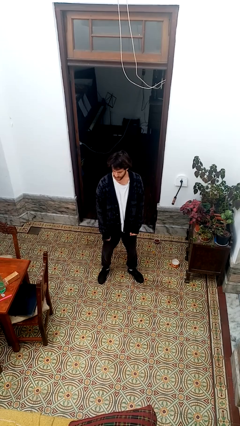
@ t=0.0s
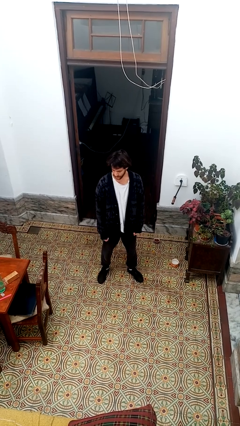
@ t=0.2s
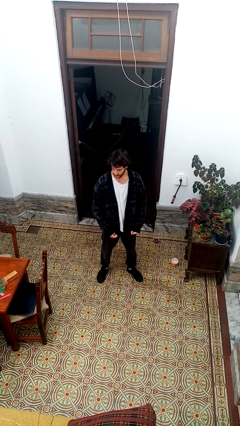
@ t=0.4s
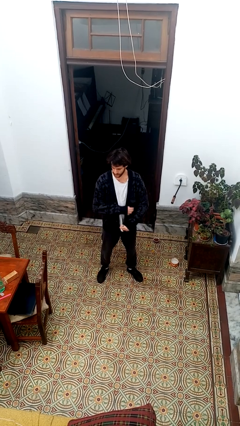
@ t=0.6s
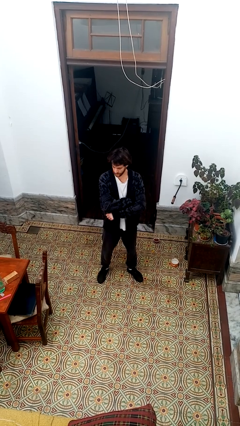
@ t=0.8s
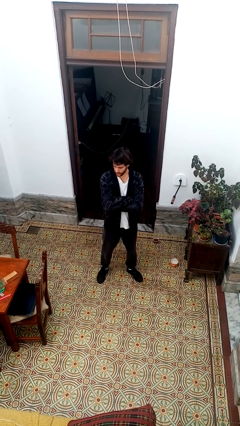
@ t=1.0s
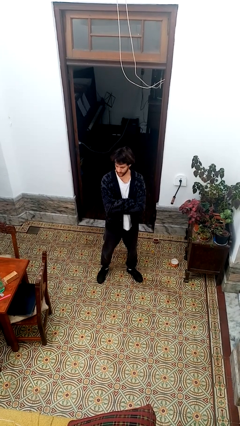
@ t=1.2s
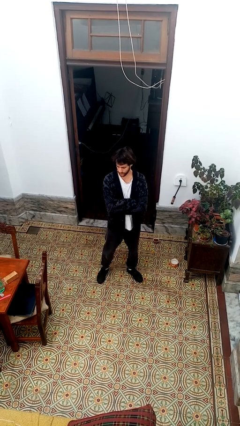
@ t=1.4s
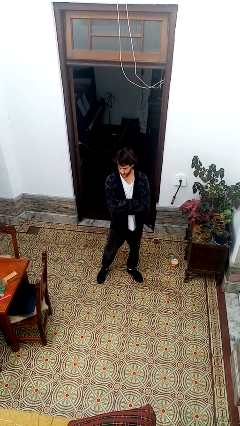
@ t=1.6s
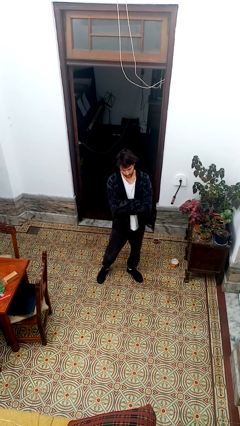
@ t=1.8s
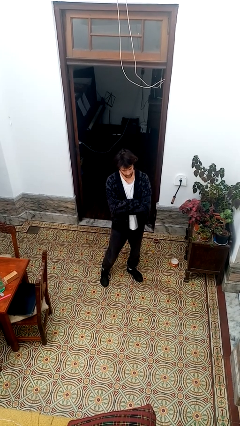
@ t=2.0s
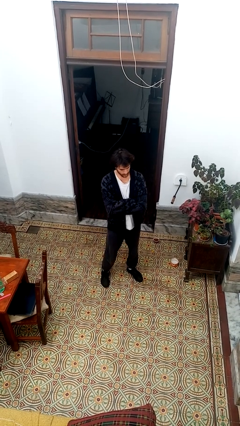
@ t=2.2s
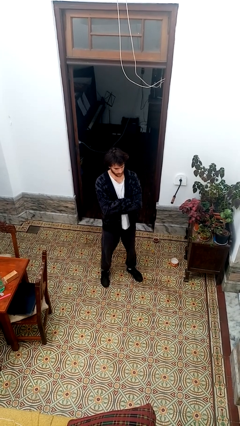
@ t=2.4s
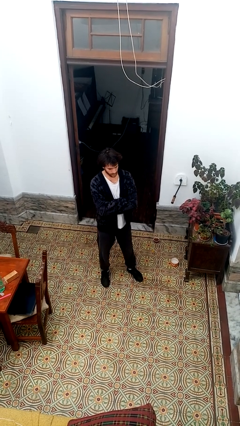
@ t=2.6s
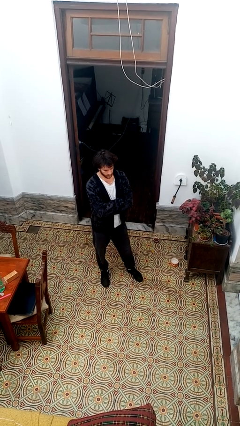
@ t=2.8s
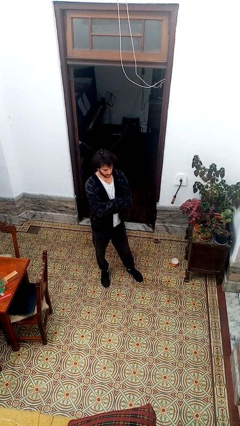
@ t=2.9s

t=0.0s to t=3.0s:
person crosses arms

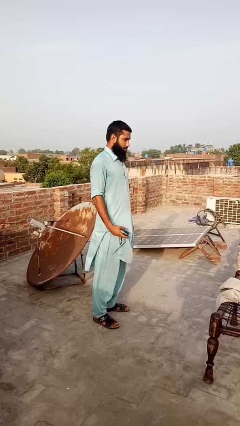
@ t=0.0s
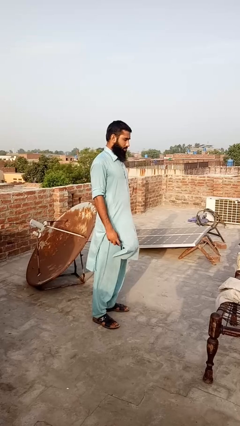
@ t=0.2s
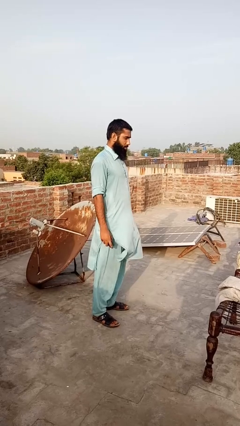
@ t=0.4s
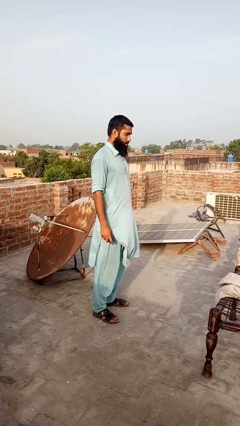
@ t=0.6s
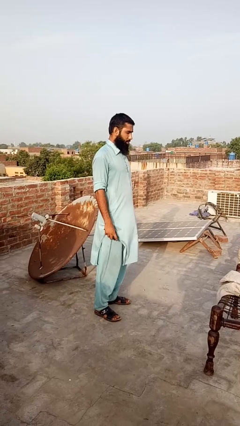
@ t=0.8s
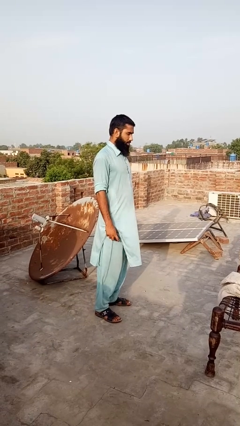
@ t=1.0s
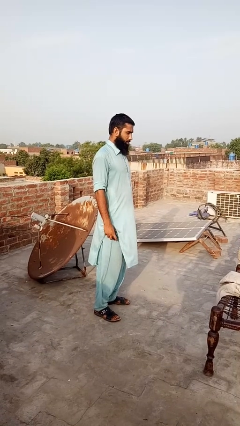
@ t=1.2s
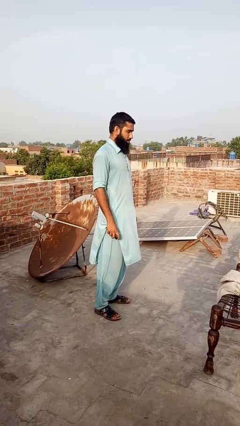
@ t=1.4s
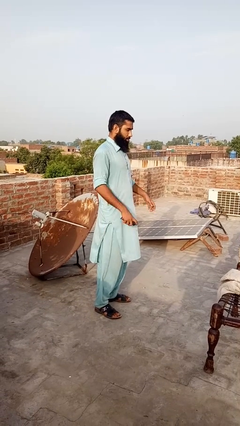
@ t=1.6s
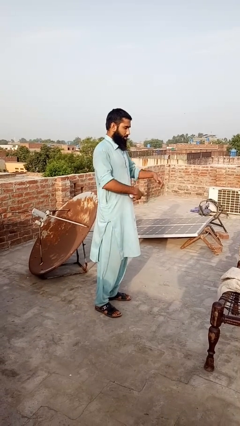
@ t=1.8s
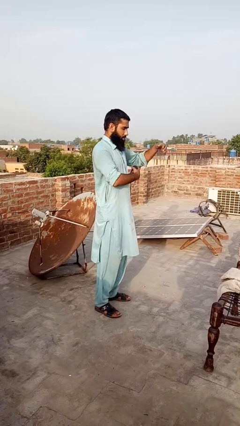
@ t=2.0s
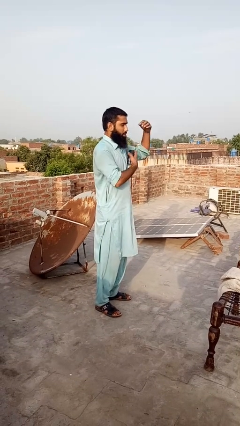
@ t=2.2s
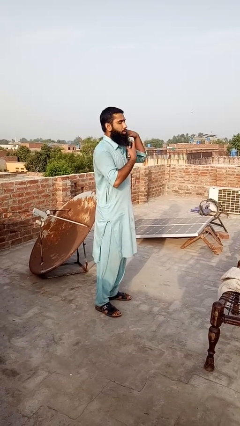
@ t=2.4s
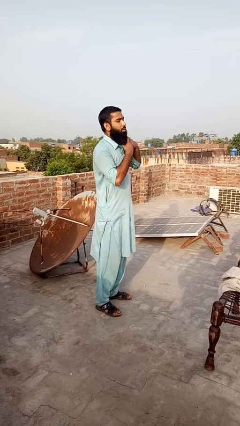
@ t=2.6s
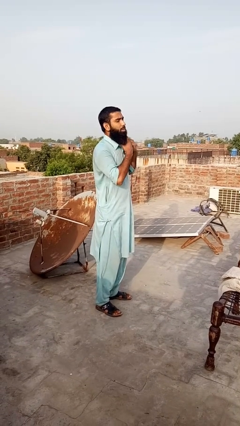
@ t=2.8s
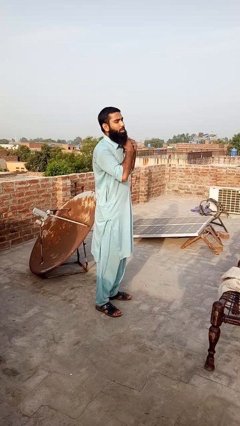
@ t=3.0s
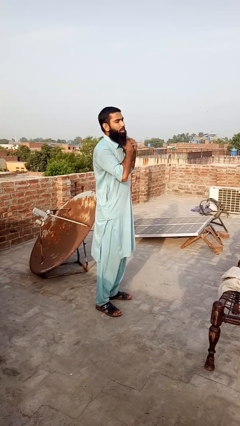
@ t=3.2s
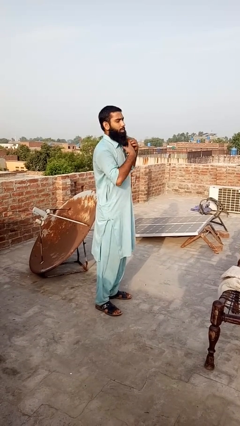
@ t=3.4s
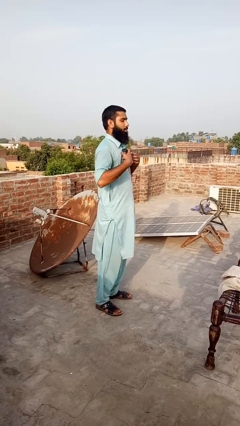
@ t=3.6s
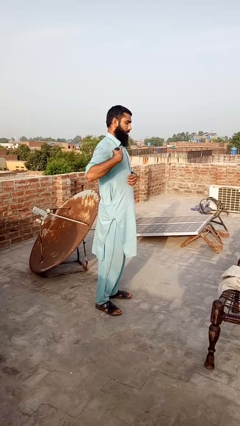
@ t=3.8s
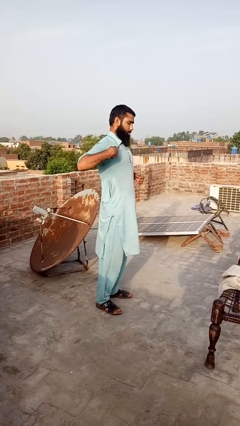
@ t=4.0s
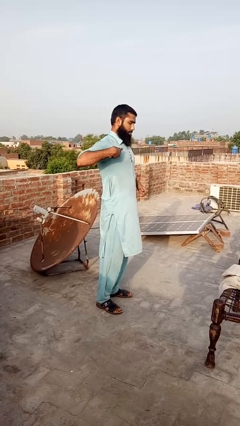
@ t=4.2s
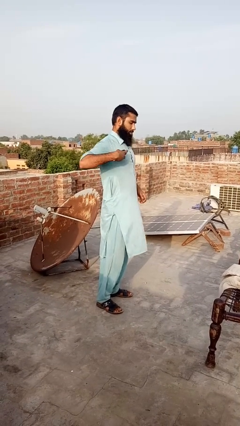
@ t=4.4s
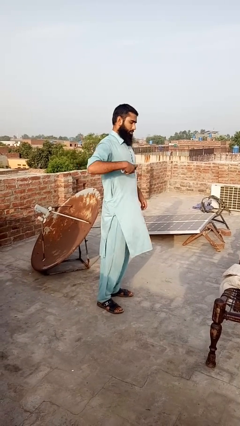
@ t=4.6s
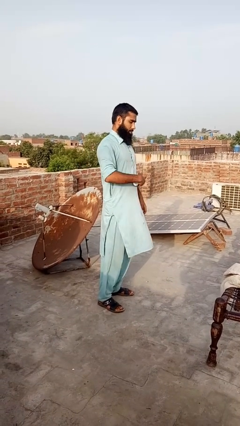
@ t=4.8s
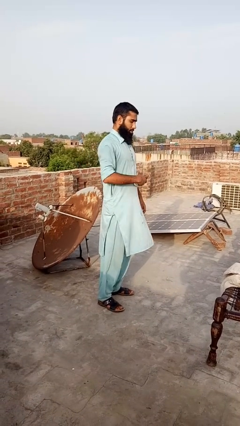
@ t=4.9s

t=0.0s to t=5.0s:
person applies deodorant

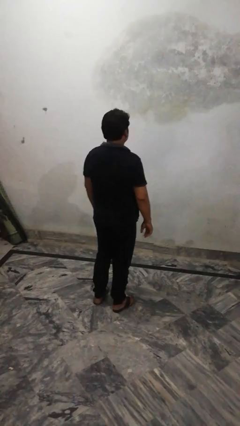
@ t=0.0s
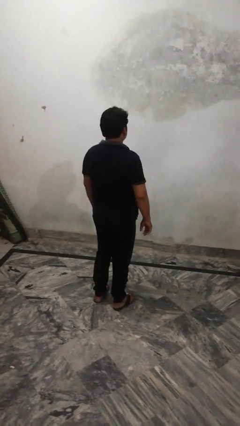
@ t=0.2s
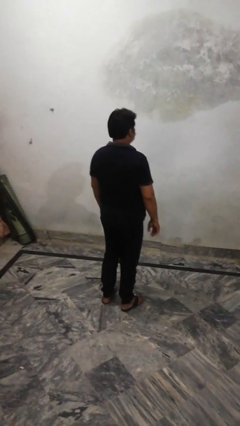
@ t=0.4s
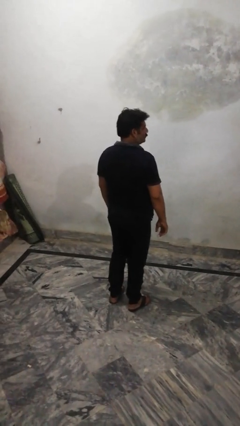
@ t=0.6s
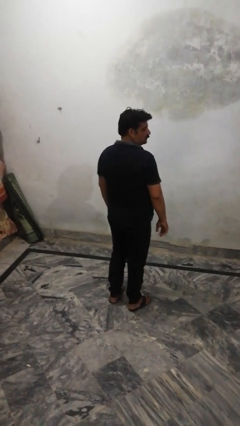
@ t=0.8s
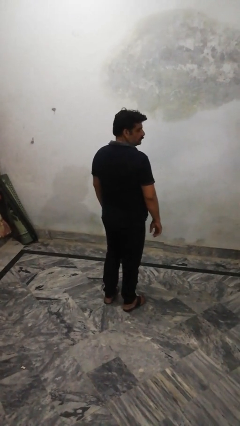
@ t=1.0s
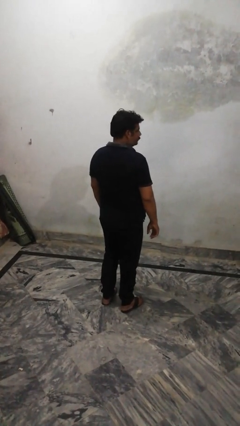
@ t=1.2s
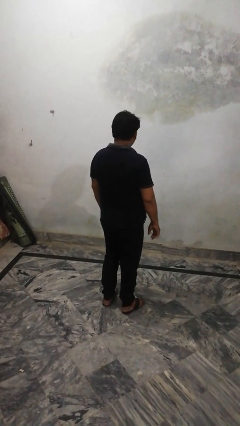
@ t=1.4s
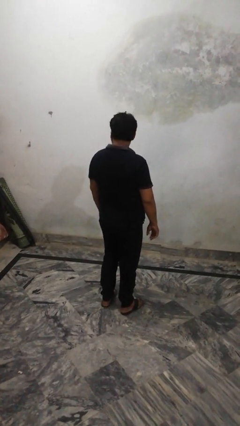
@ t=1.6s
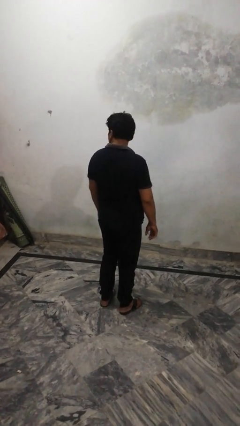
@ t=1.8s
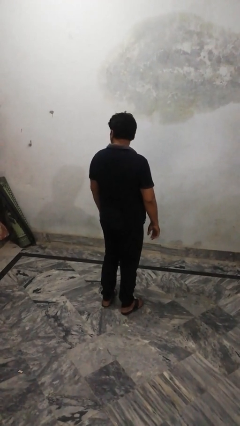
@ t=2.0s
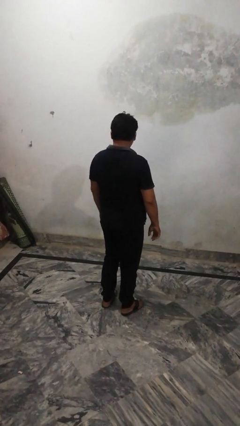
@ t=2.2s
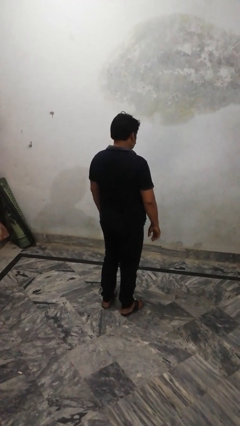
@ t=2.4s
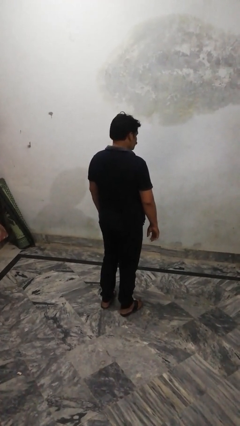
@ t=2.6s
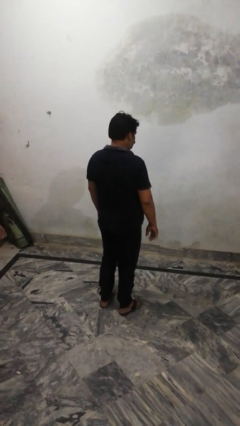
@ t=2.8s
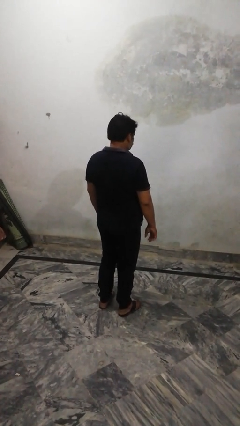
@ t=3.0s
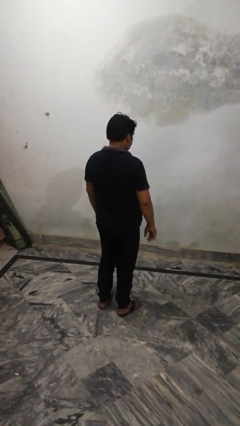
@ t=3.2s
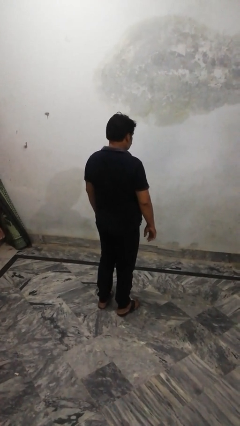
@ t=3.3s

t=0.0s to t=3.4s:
person shakes head

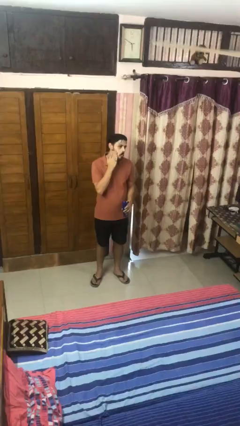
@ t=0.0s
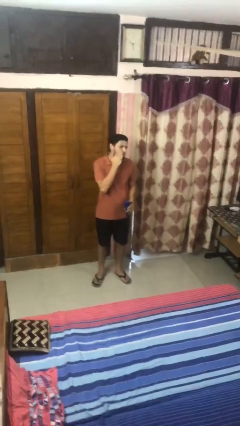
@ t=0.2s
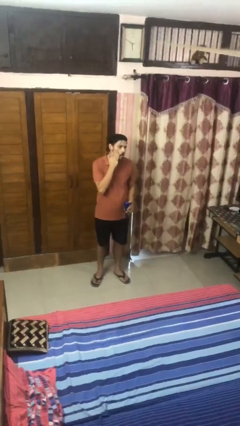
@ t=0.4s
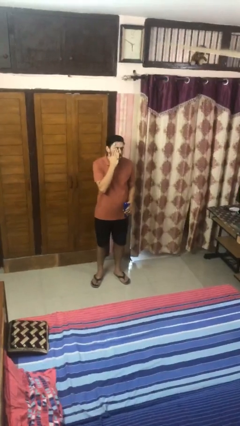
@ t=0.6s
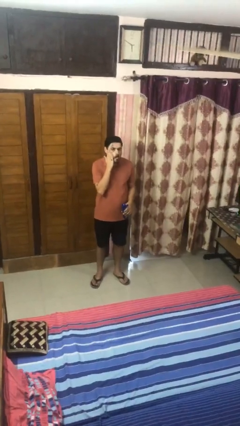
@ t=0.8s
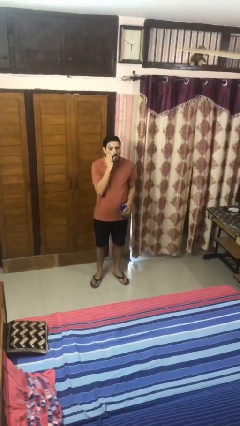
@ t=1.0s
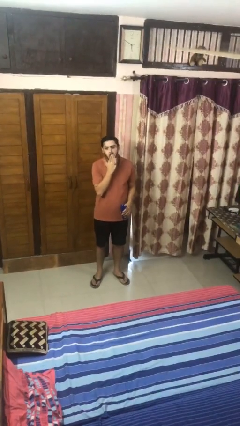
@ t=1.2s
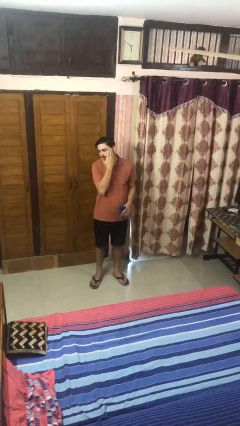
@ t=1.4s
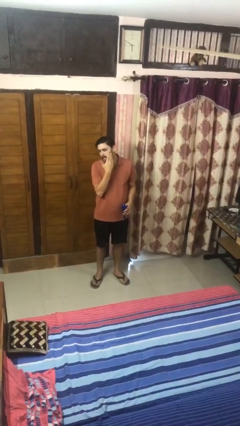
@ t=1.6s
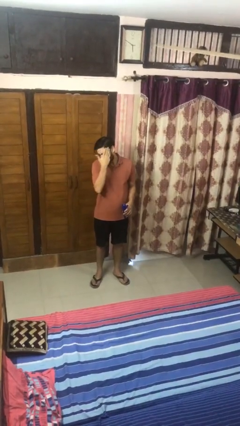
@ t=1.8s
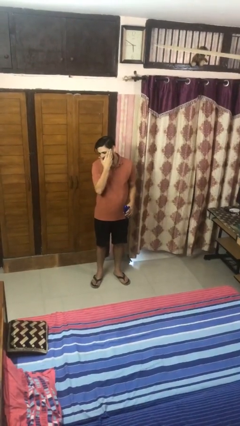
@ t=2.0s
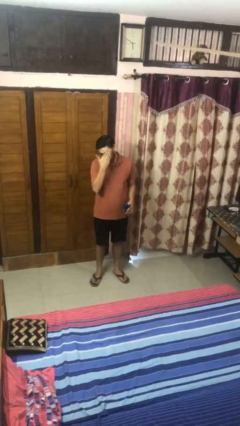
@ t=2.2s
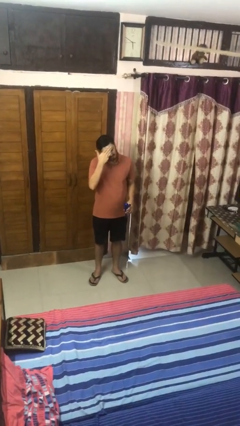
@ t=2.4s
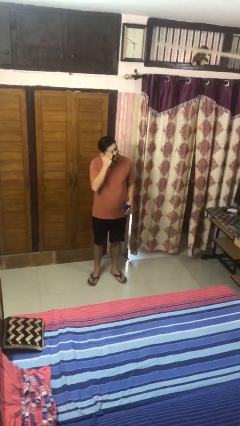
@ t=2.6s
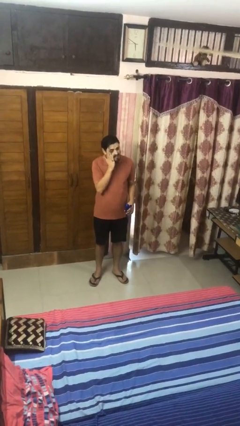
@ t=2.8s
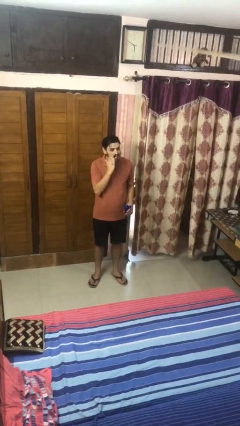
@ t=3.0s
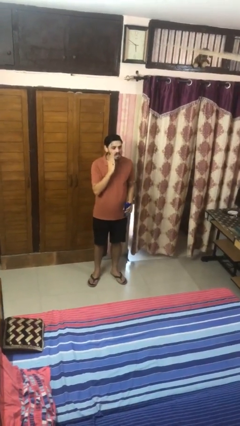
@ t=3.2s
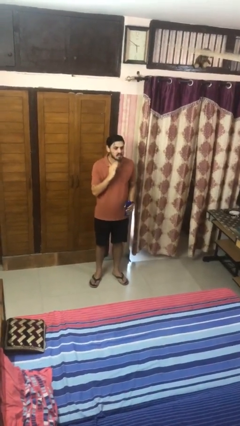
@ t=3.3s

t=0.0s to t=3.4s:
person applies sunscreen

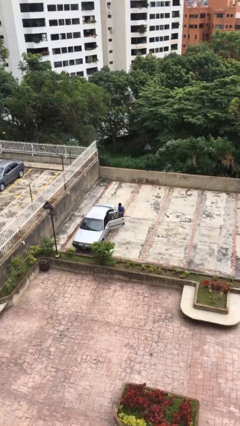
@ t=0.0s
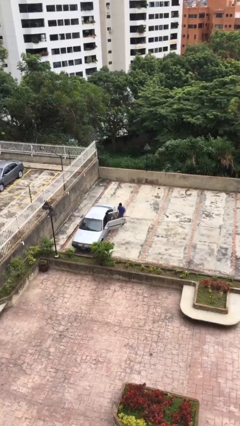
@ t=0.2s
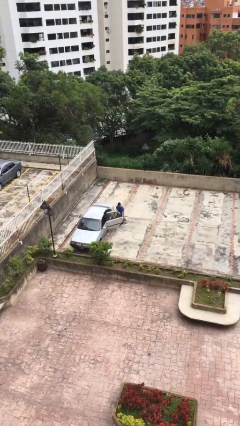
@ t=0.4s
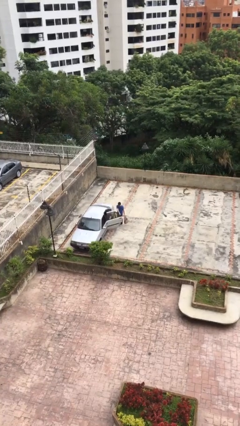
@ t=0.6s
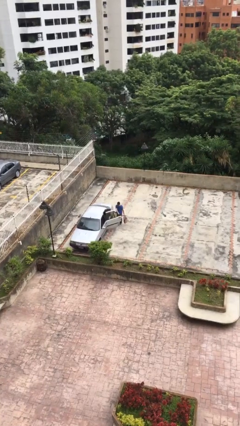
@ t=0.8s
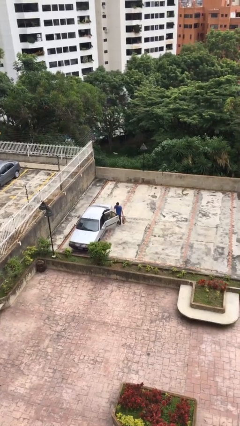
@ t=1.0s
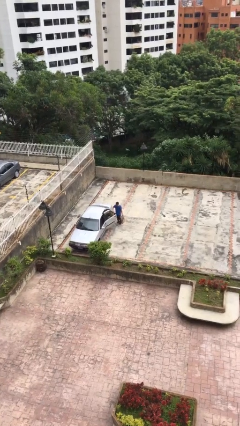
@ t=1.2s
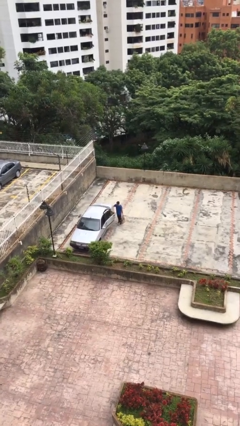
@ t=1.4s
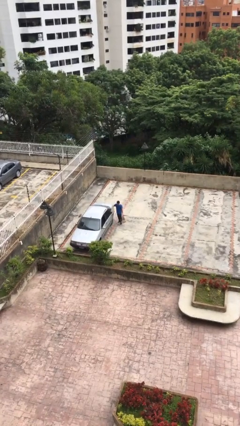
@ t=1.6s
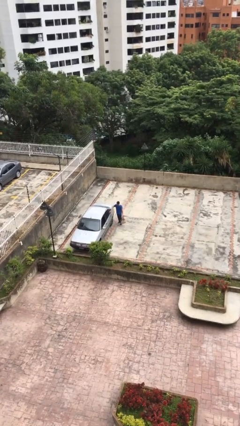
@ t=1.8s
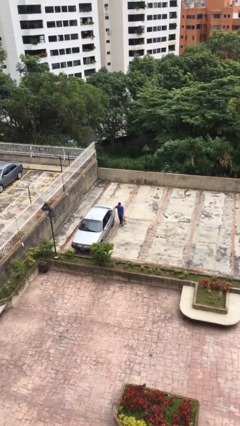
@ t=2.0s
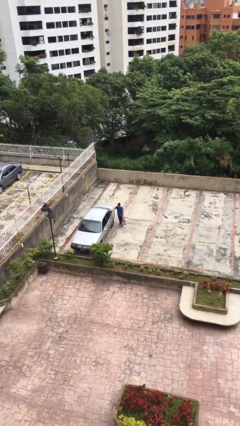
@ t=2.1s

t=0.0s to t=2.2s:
person closes car door

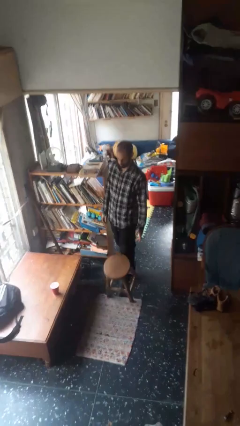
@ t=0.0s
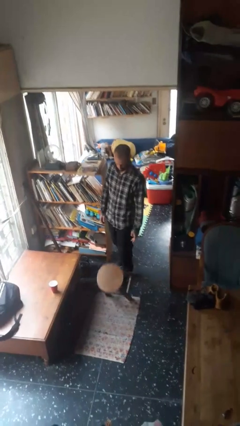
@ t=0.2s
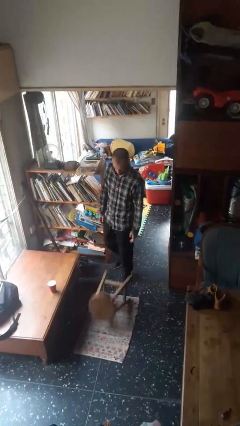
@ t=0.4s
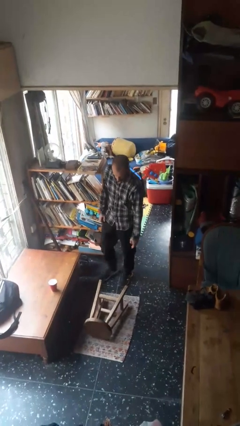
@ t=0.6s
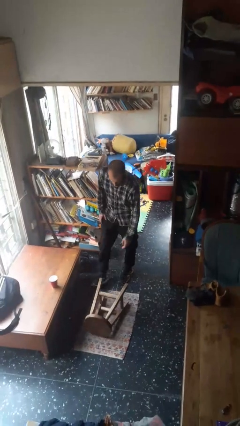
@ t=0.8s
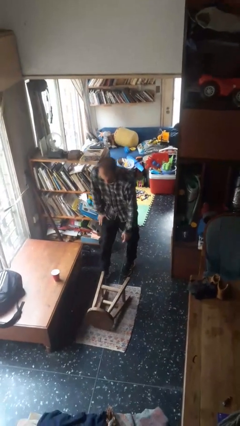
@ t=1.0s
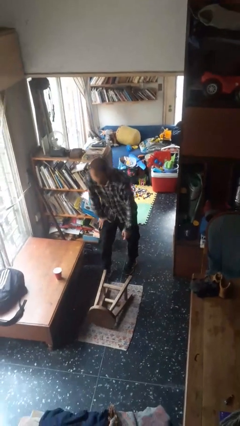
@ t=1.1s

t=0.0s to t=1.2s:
person knocks over furniture
